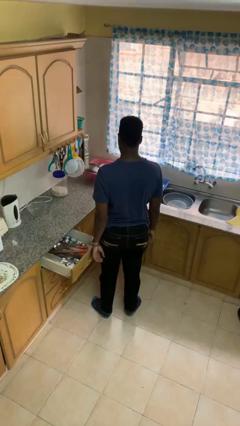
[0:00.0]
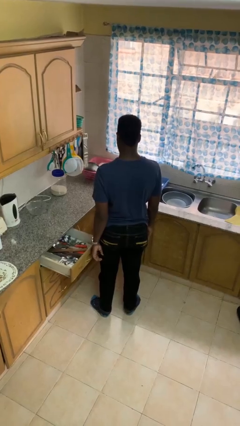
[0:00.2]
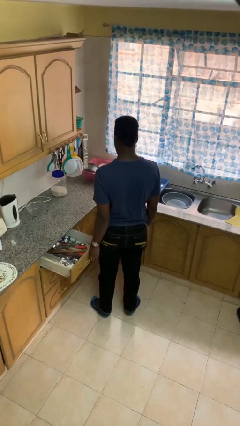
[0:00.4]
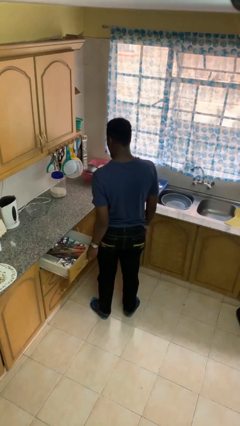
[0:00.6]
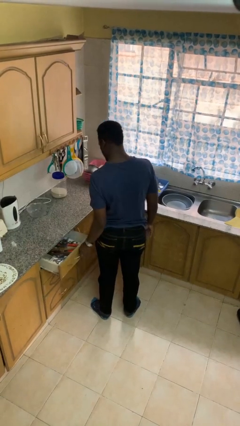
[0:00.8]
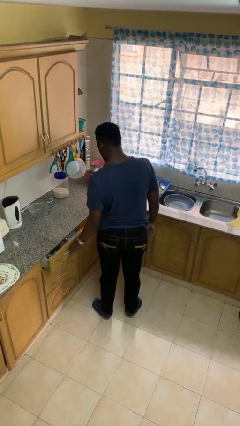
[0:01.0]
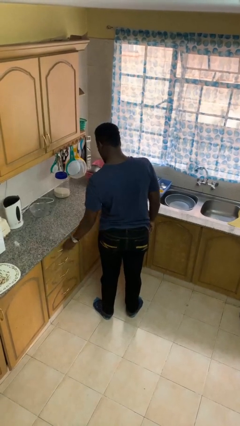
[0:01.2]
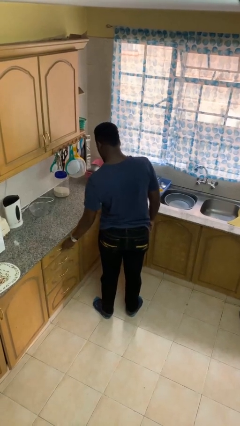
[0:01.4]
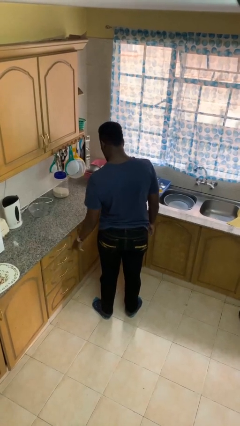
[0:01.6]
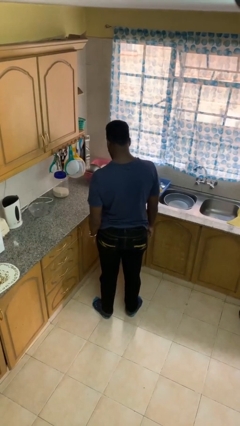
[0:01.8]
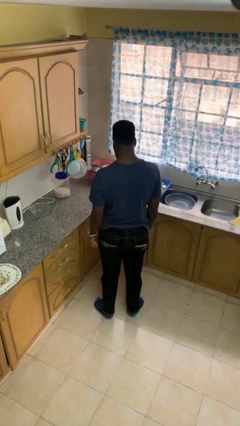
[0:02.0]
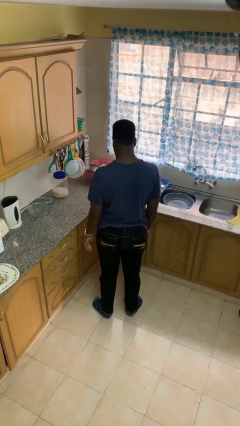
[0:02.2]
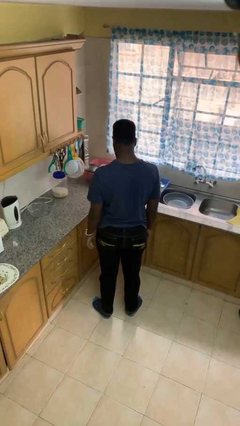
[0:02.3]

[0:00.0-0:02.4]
person closes kitchen drawer

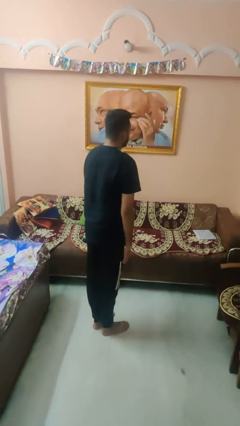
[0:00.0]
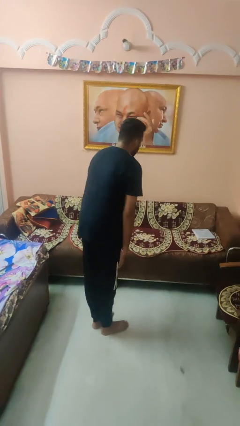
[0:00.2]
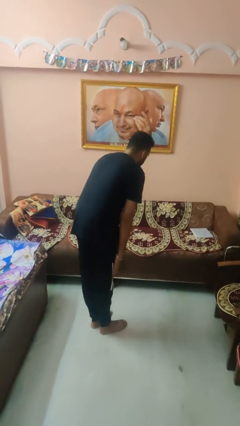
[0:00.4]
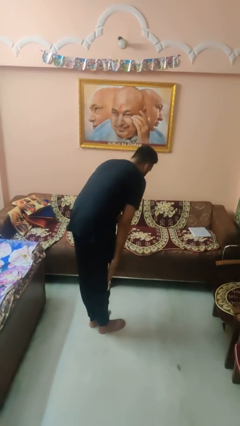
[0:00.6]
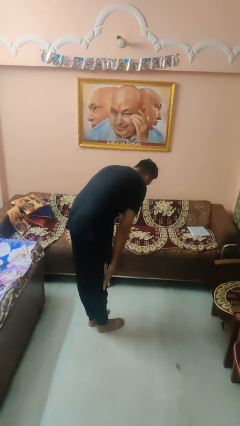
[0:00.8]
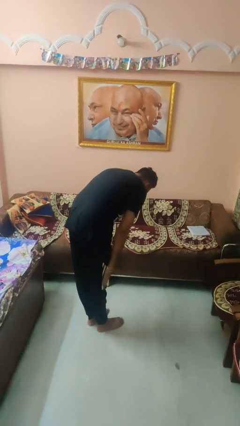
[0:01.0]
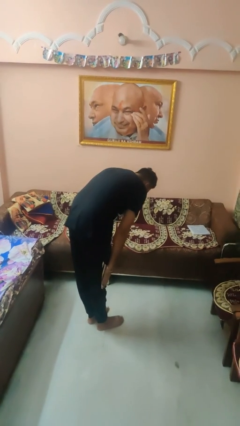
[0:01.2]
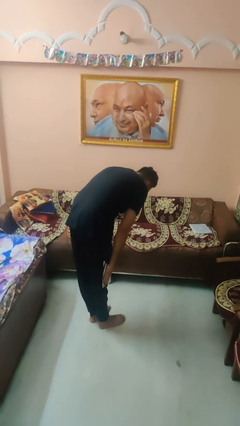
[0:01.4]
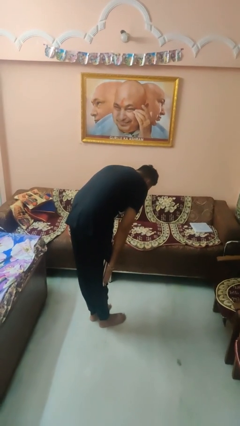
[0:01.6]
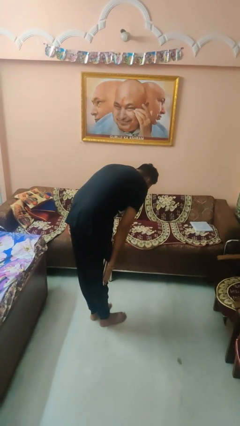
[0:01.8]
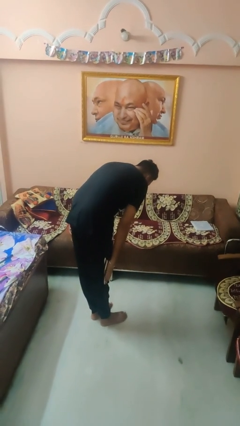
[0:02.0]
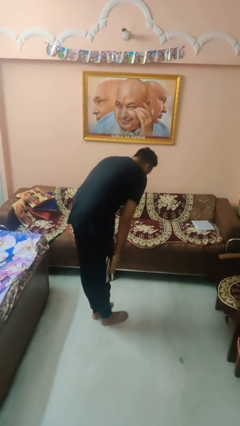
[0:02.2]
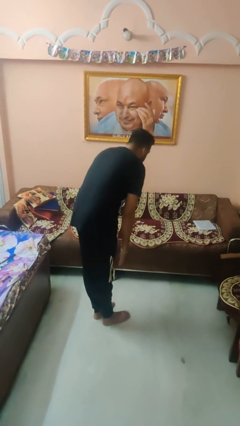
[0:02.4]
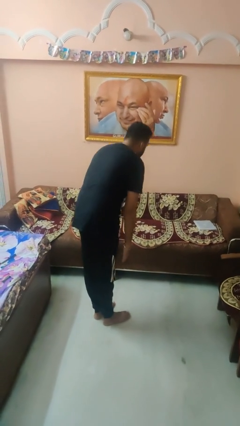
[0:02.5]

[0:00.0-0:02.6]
person bows

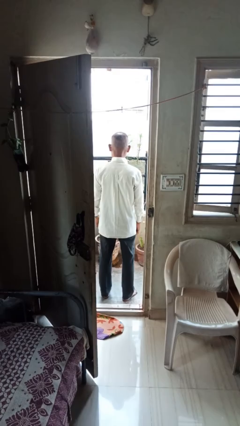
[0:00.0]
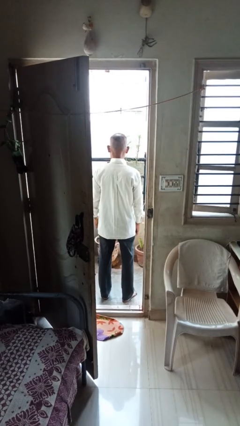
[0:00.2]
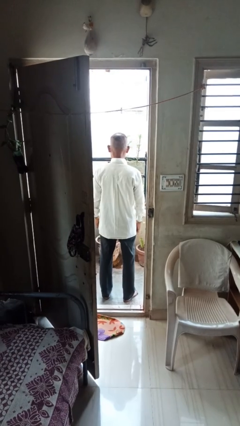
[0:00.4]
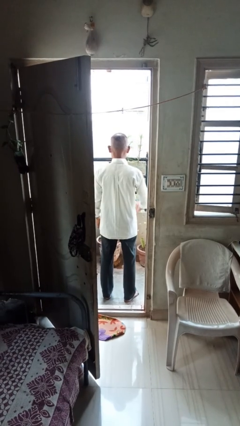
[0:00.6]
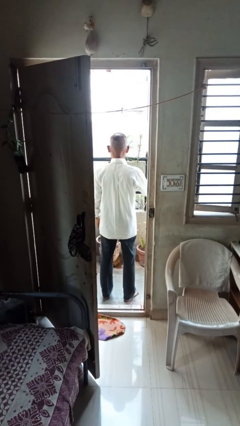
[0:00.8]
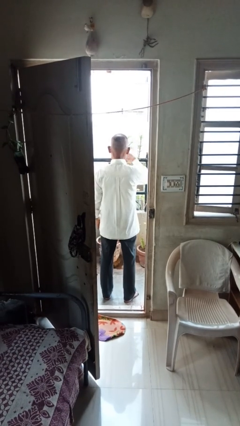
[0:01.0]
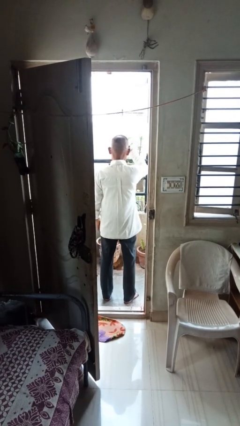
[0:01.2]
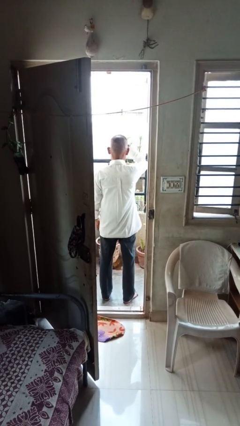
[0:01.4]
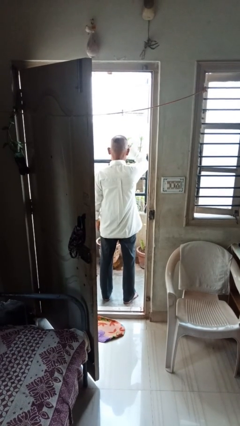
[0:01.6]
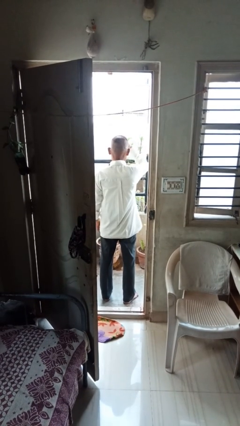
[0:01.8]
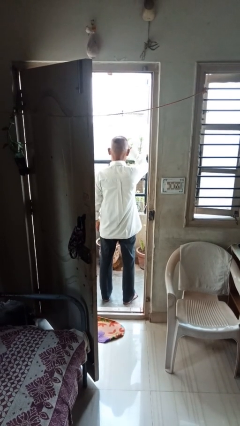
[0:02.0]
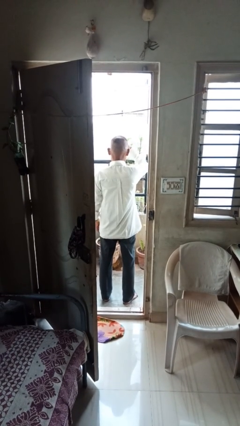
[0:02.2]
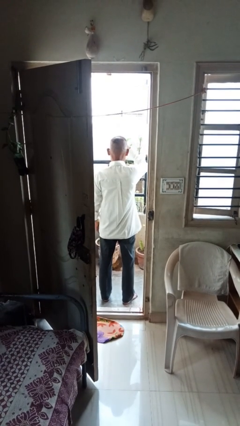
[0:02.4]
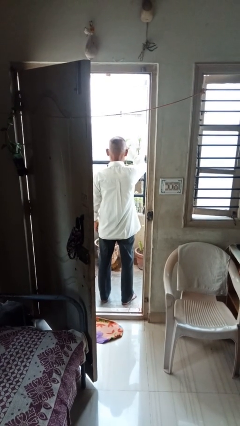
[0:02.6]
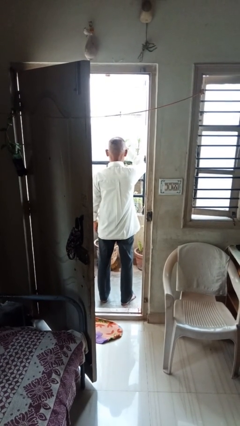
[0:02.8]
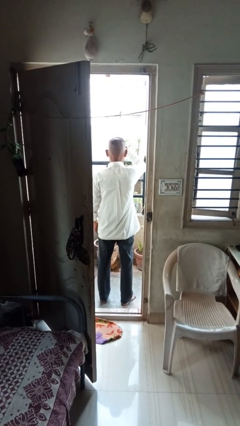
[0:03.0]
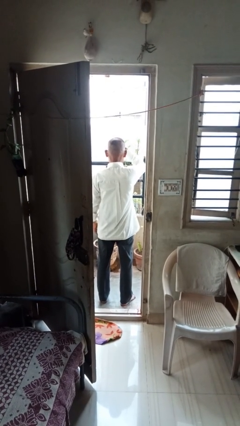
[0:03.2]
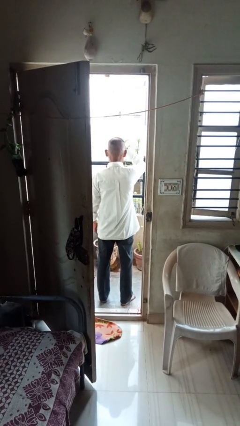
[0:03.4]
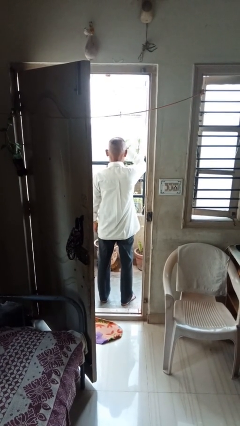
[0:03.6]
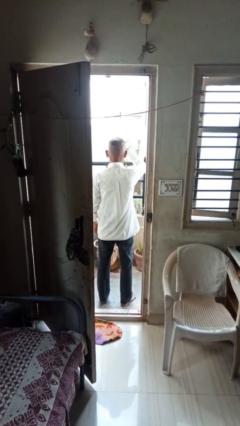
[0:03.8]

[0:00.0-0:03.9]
person shades eyes

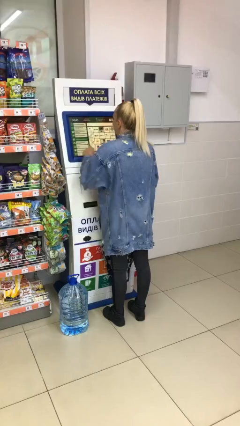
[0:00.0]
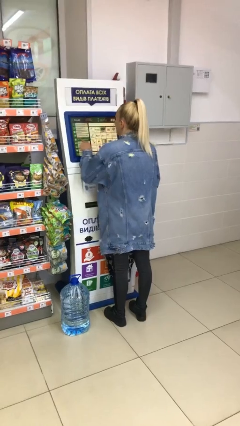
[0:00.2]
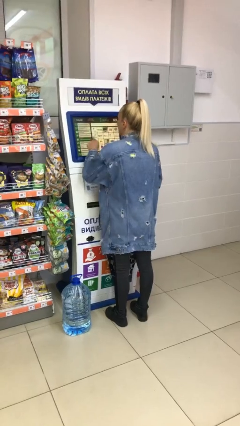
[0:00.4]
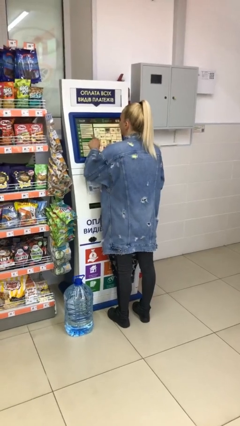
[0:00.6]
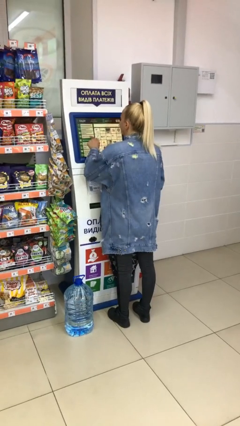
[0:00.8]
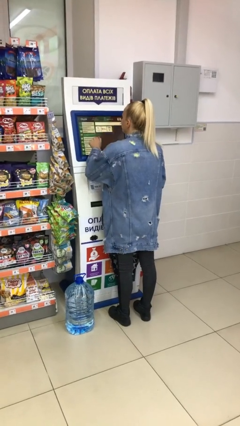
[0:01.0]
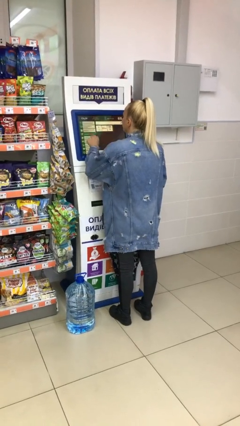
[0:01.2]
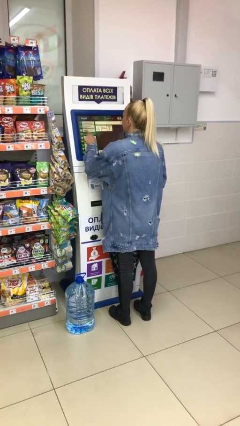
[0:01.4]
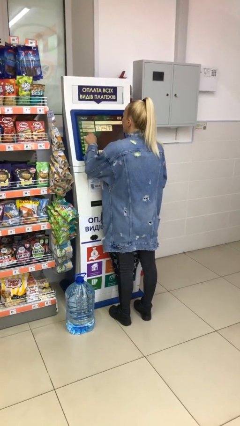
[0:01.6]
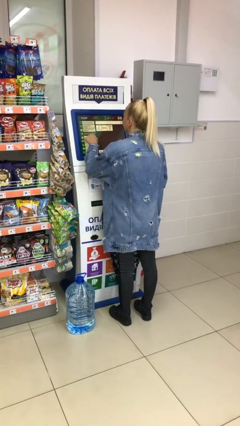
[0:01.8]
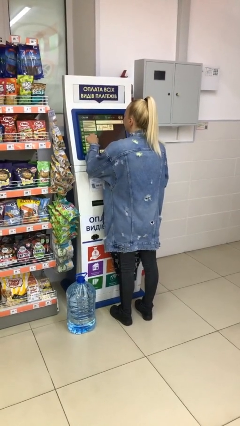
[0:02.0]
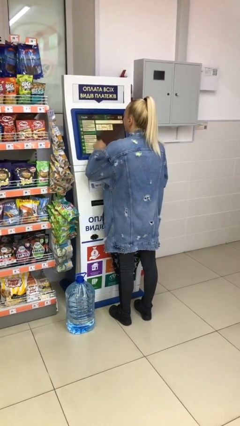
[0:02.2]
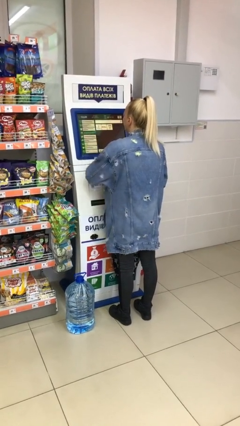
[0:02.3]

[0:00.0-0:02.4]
person purchases from machine

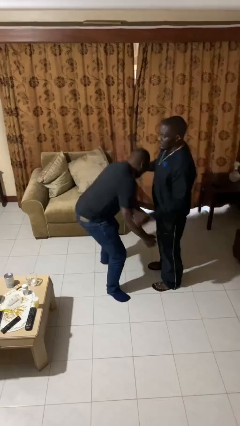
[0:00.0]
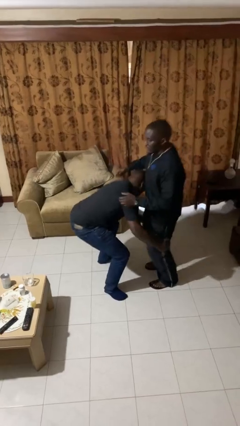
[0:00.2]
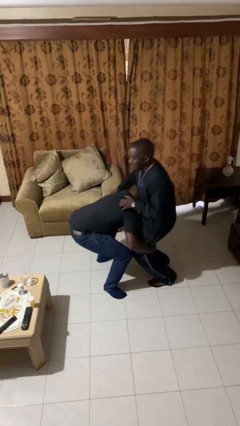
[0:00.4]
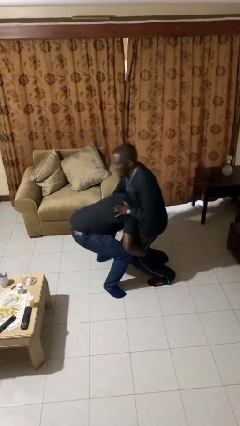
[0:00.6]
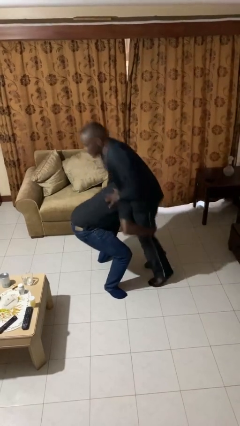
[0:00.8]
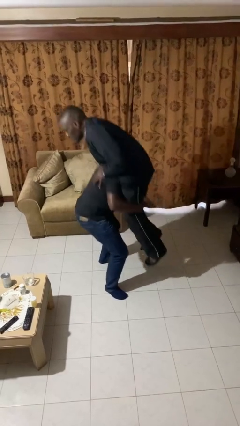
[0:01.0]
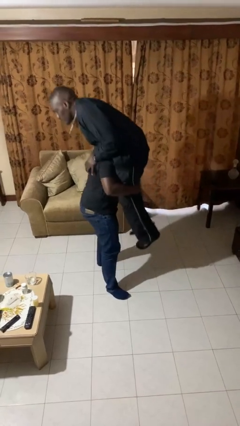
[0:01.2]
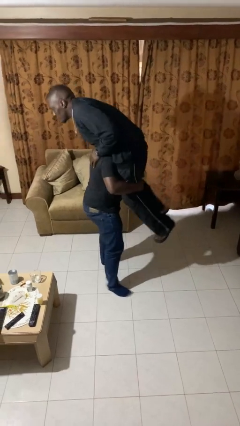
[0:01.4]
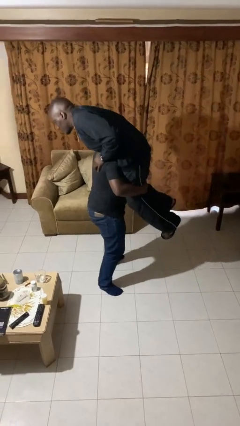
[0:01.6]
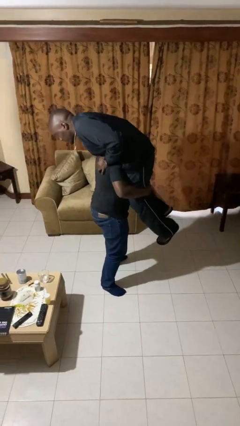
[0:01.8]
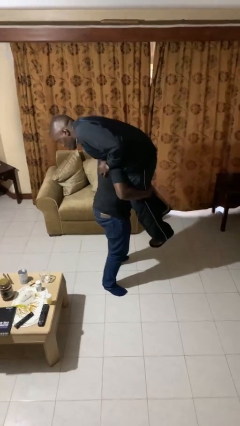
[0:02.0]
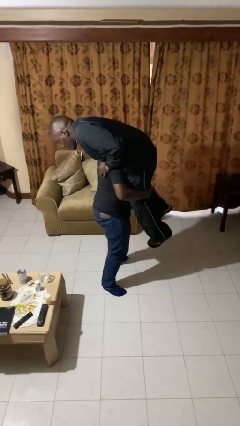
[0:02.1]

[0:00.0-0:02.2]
person carries person over shoulder

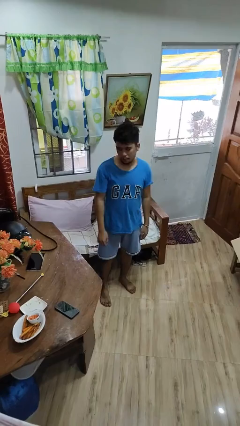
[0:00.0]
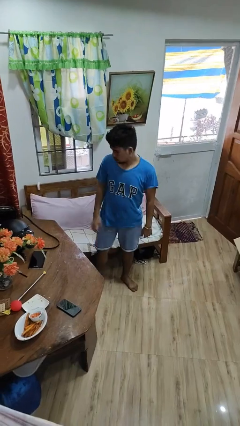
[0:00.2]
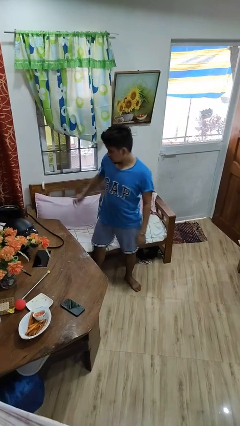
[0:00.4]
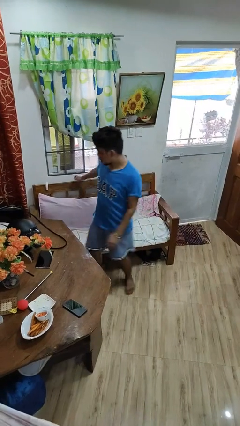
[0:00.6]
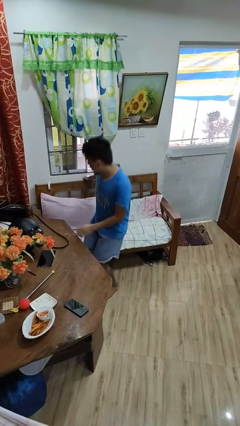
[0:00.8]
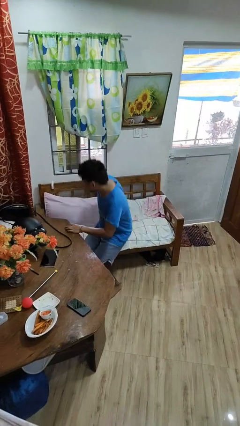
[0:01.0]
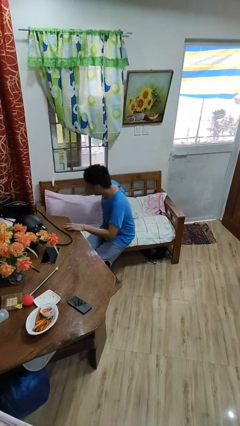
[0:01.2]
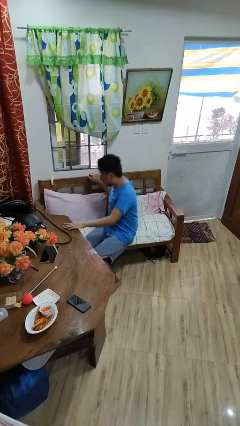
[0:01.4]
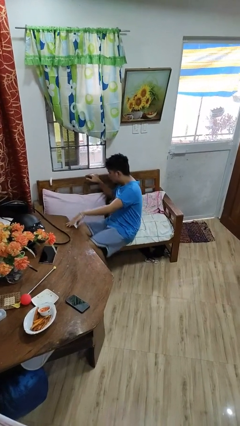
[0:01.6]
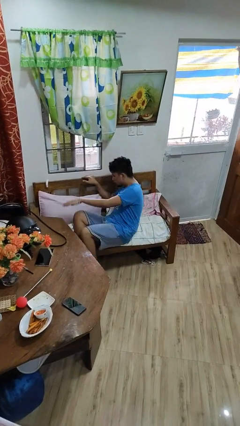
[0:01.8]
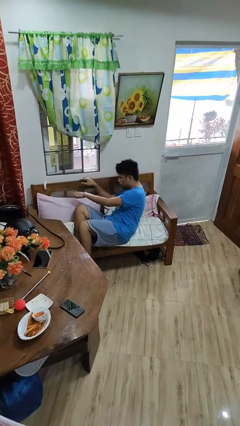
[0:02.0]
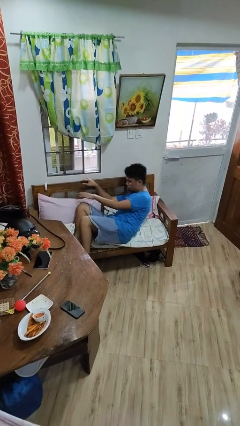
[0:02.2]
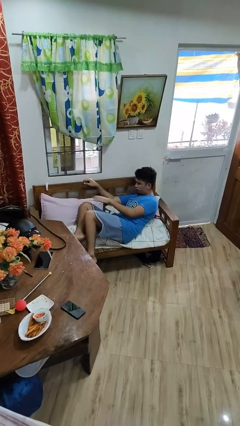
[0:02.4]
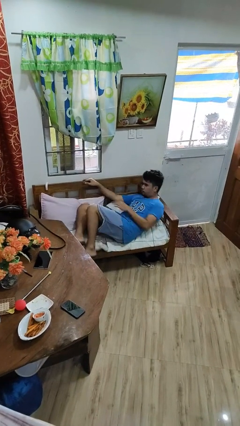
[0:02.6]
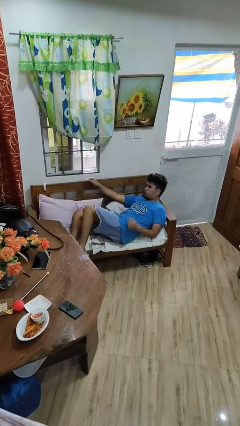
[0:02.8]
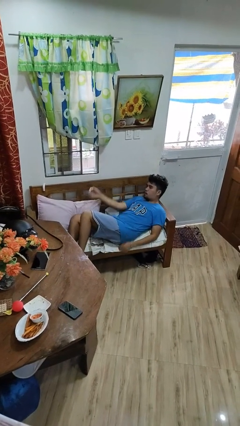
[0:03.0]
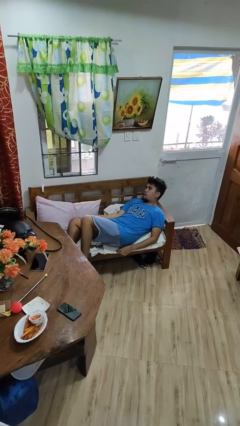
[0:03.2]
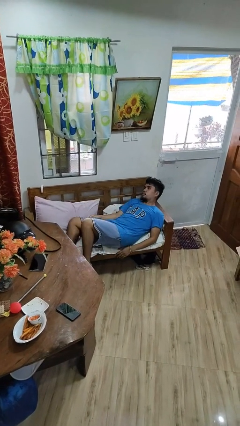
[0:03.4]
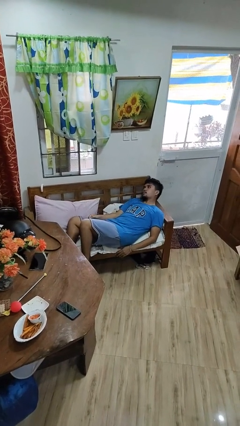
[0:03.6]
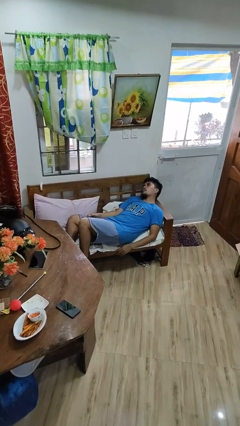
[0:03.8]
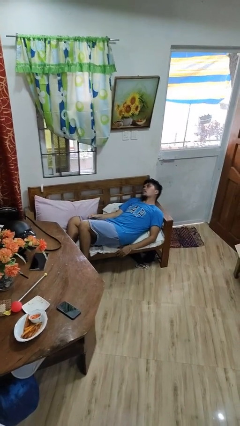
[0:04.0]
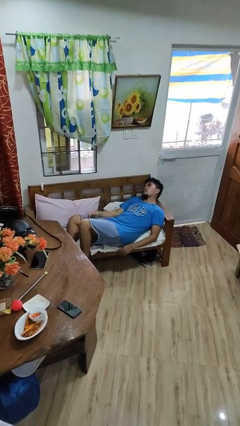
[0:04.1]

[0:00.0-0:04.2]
person lies down on couch

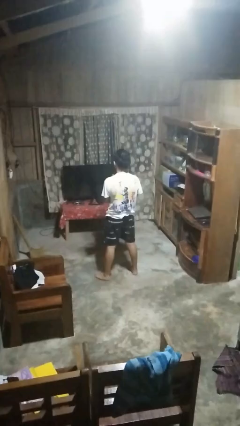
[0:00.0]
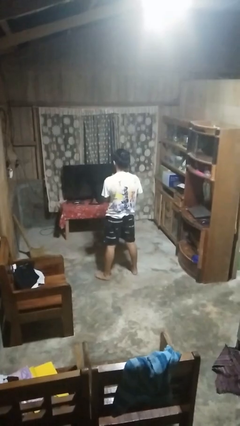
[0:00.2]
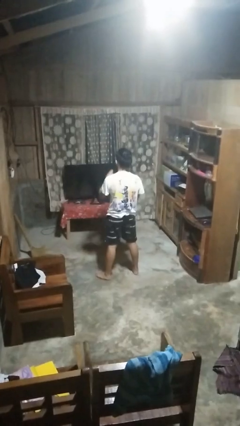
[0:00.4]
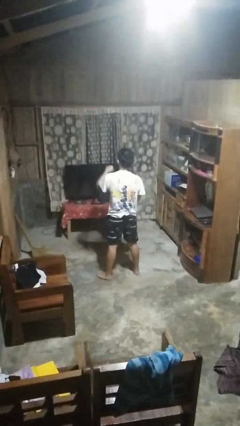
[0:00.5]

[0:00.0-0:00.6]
person punches
